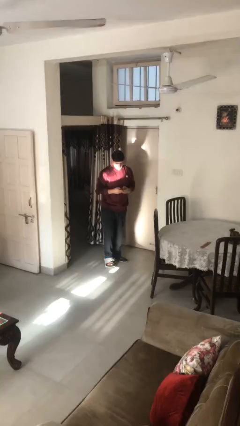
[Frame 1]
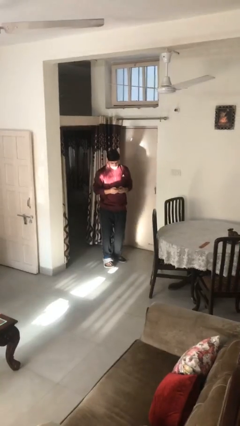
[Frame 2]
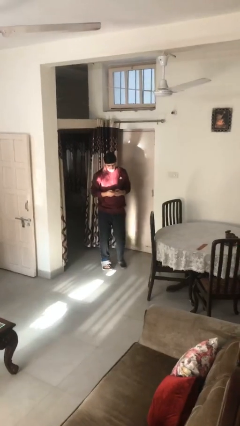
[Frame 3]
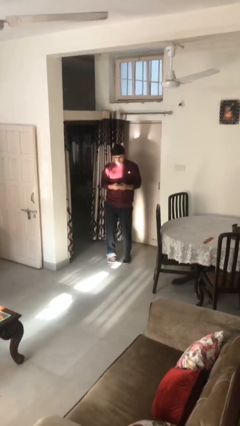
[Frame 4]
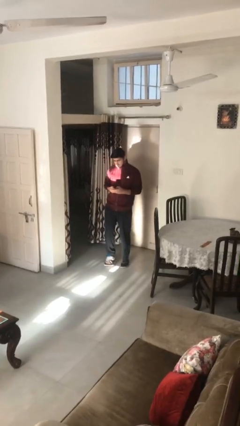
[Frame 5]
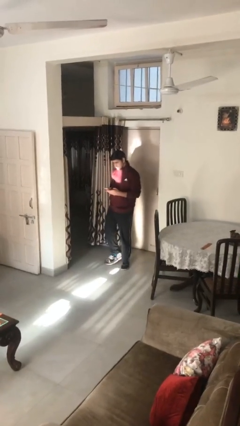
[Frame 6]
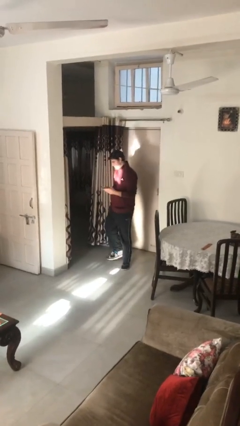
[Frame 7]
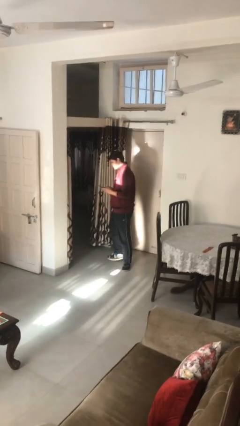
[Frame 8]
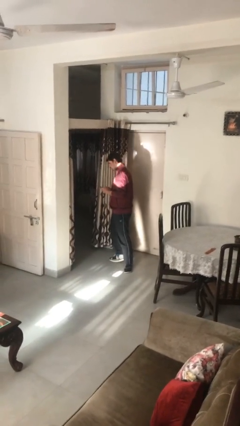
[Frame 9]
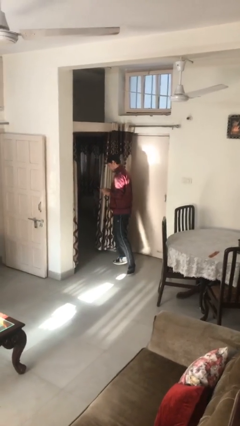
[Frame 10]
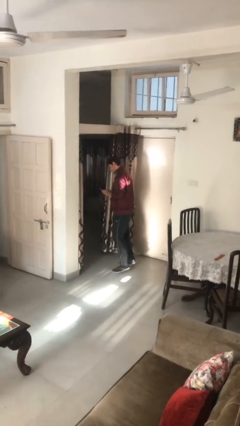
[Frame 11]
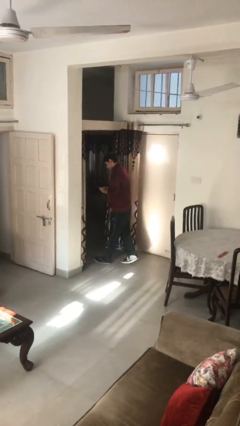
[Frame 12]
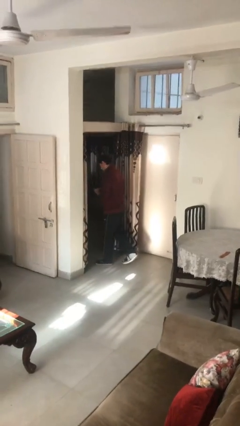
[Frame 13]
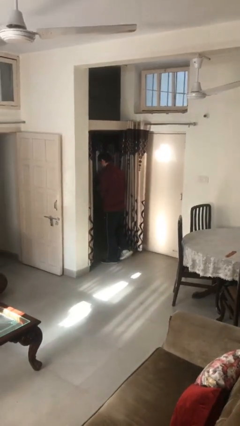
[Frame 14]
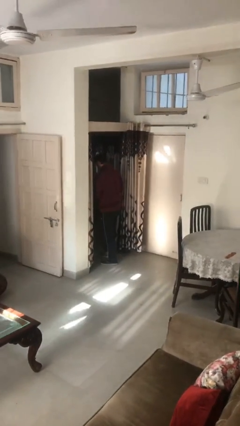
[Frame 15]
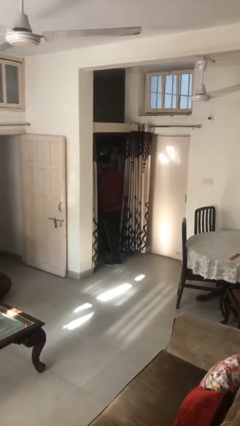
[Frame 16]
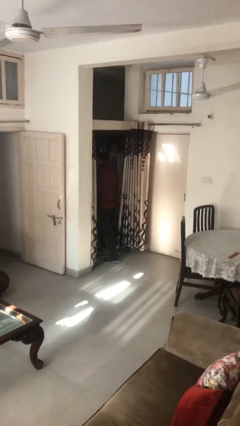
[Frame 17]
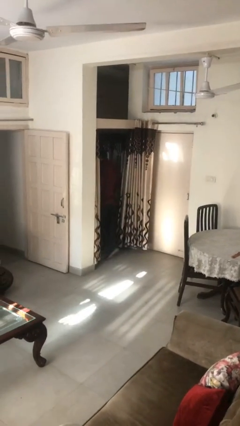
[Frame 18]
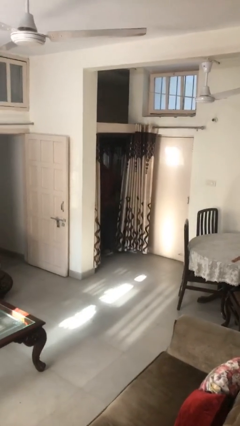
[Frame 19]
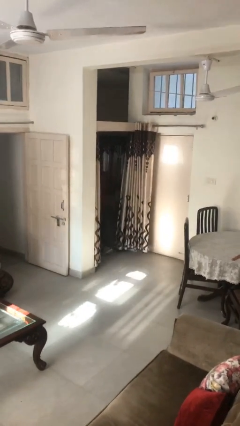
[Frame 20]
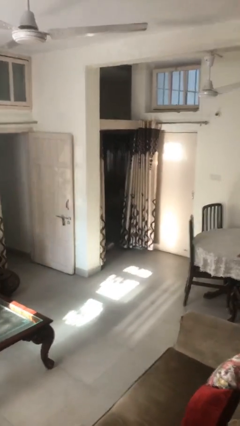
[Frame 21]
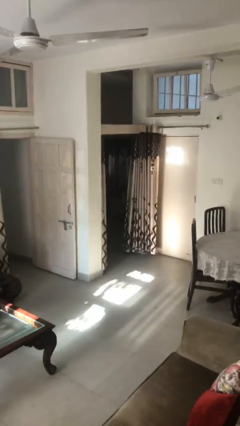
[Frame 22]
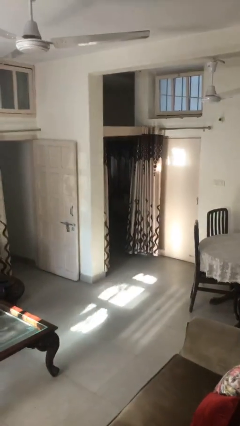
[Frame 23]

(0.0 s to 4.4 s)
person exits scene through structure

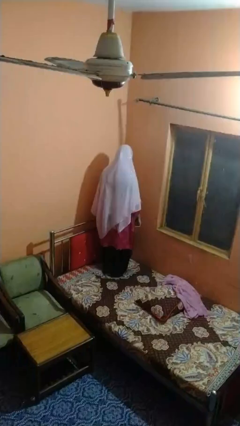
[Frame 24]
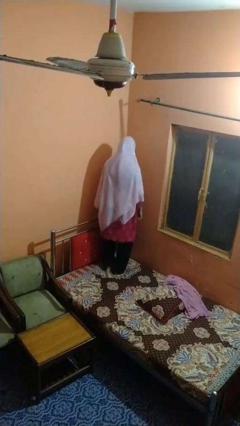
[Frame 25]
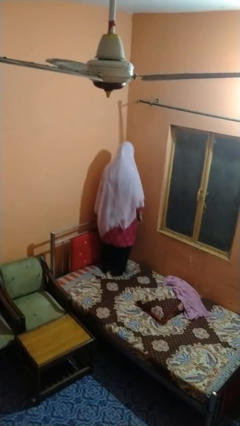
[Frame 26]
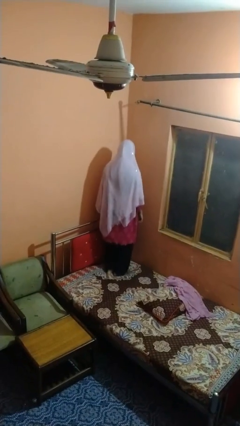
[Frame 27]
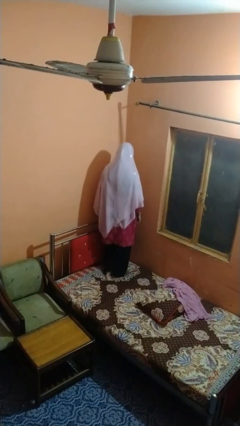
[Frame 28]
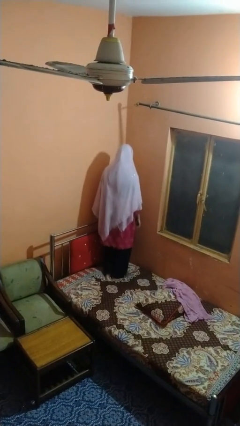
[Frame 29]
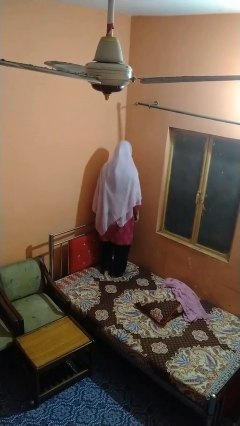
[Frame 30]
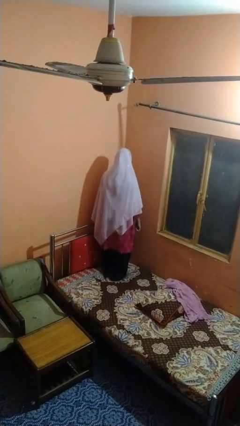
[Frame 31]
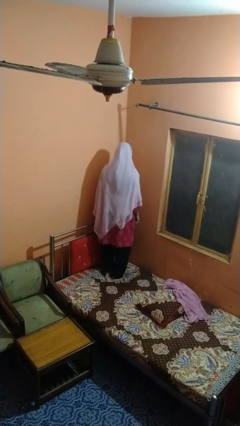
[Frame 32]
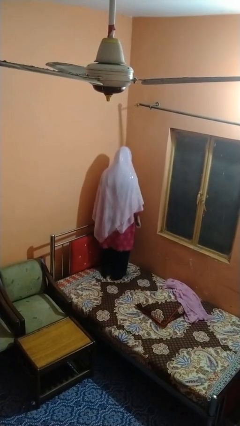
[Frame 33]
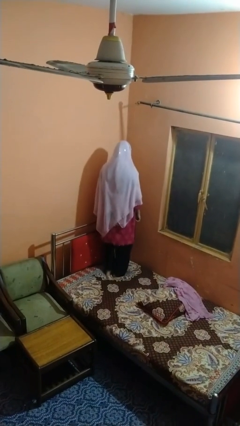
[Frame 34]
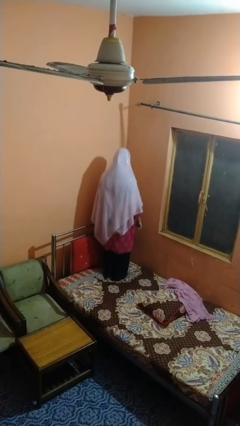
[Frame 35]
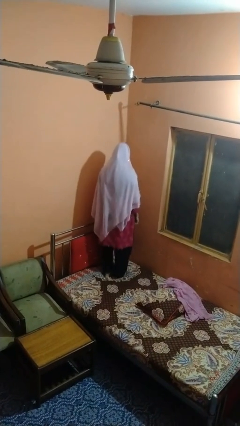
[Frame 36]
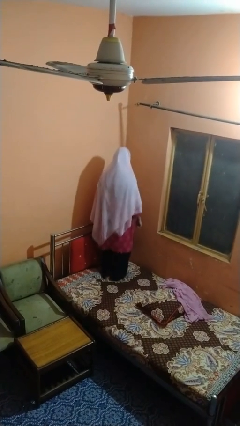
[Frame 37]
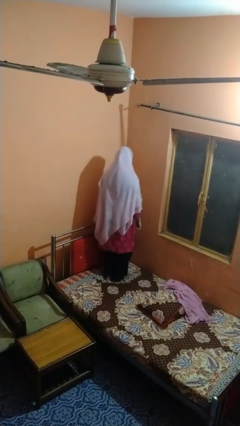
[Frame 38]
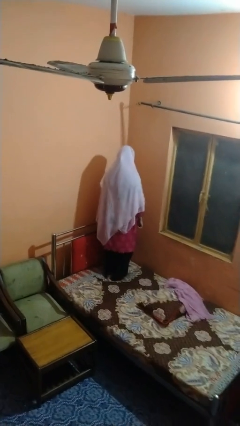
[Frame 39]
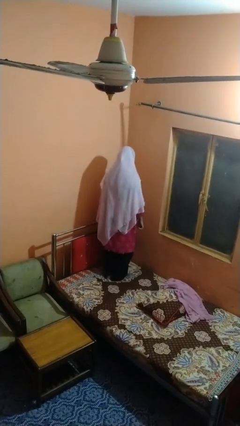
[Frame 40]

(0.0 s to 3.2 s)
person jumps on bed

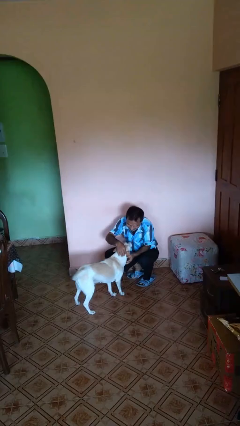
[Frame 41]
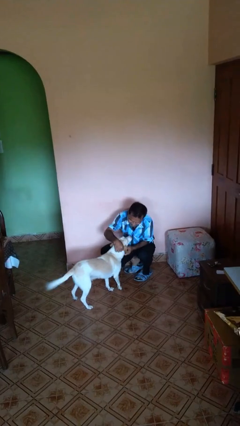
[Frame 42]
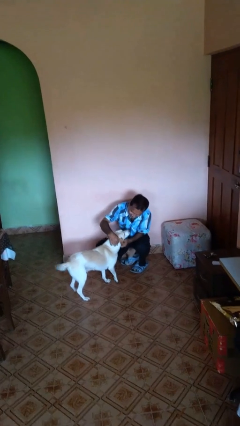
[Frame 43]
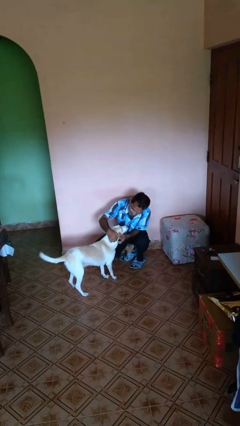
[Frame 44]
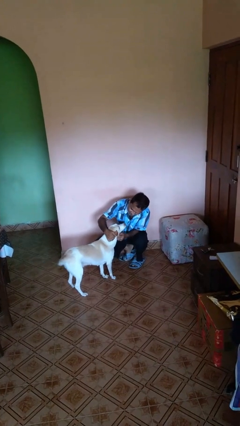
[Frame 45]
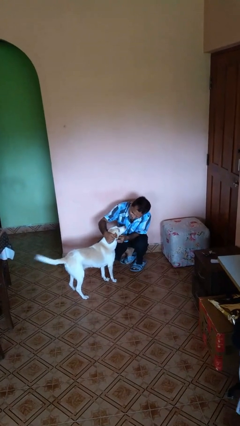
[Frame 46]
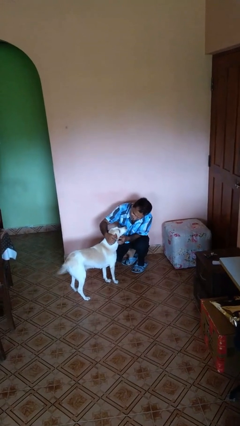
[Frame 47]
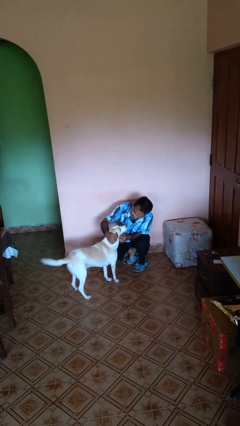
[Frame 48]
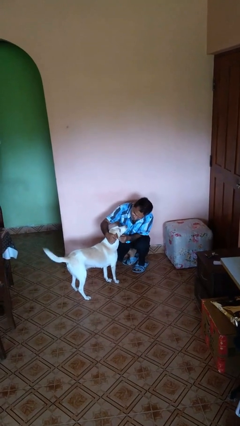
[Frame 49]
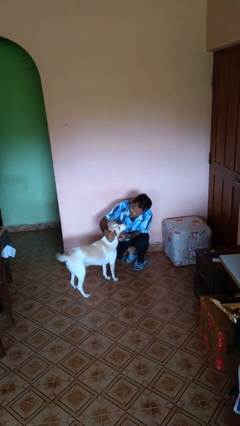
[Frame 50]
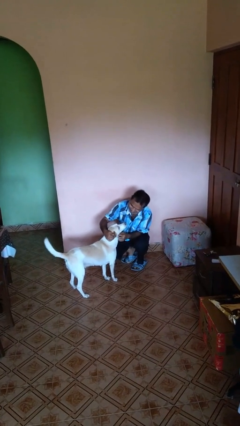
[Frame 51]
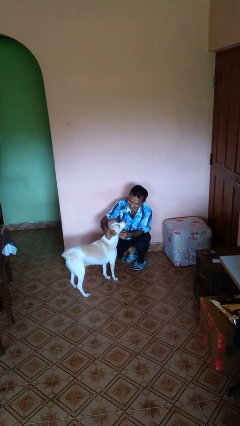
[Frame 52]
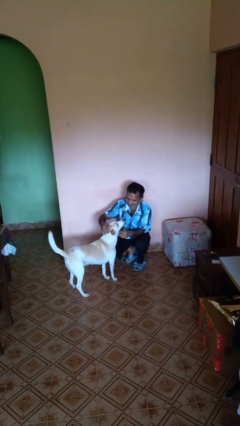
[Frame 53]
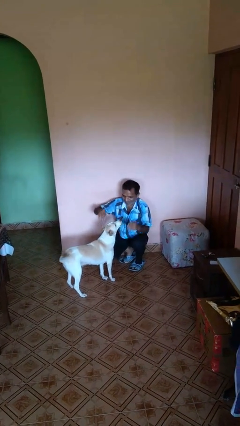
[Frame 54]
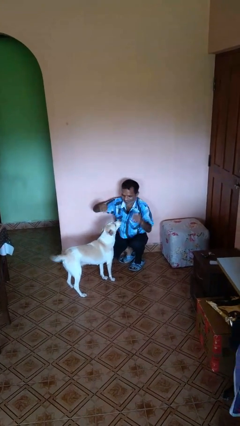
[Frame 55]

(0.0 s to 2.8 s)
person pets dog

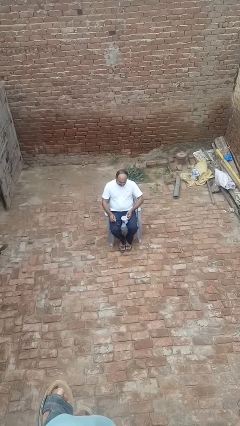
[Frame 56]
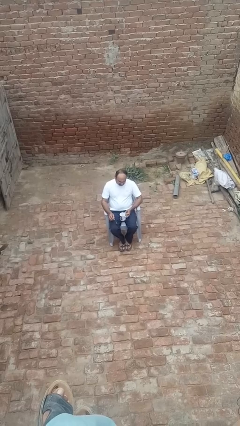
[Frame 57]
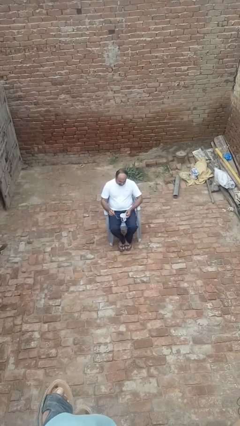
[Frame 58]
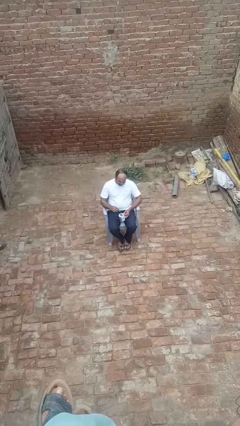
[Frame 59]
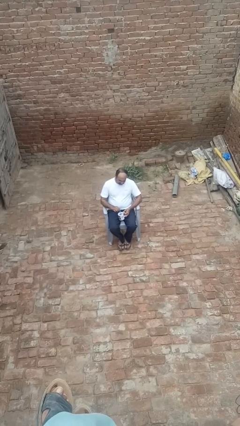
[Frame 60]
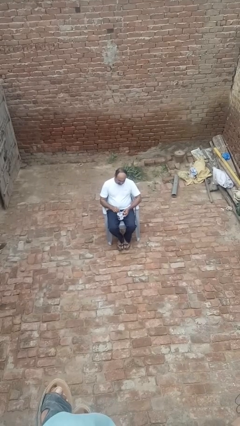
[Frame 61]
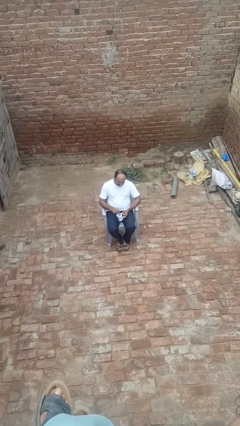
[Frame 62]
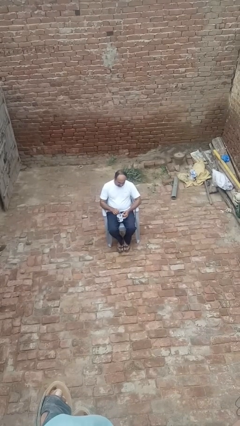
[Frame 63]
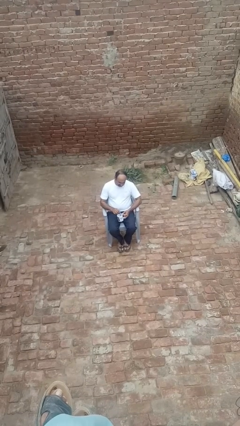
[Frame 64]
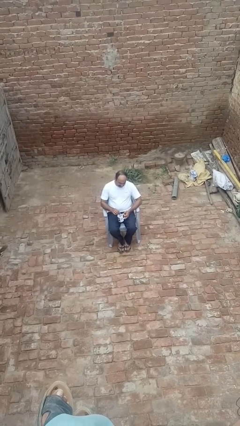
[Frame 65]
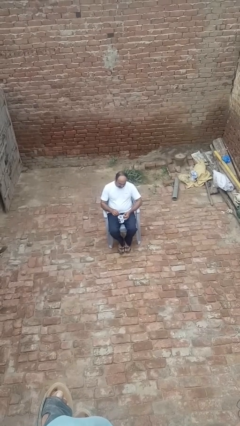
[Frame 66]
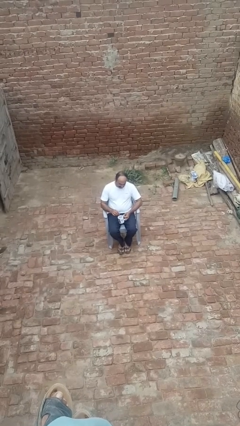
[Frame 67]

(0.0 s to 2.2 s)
person stirs mug

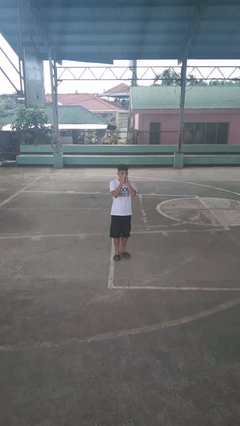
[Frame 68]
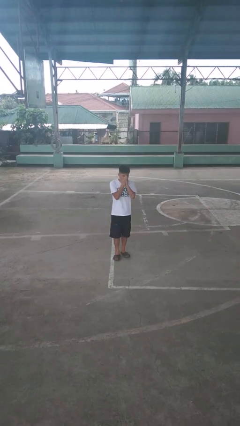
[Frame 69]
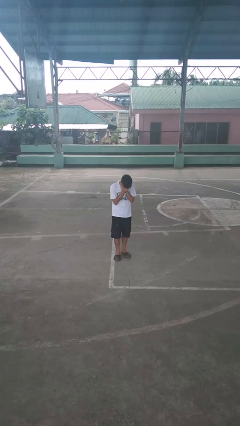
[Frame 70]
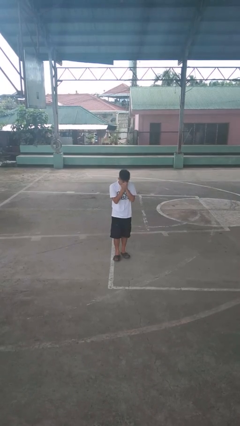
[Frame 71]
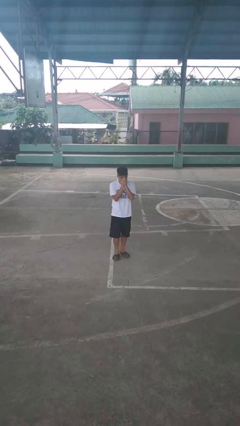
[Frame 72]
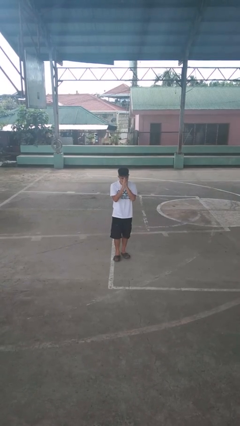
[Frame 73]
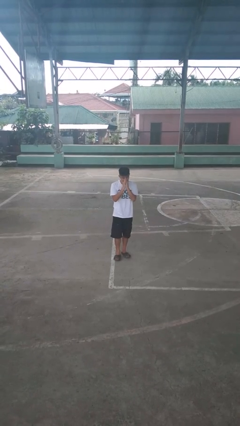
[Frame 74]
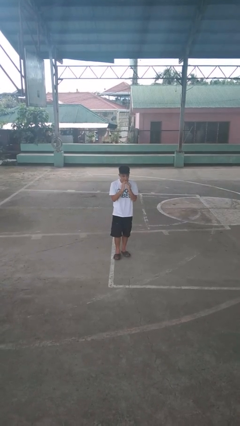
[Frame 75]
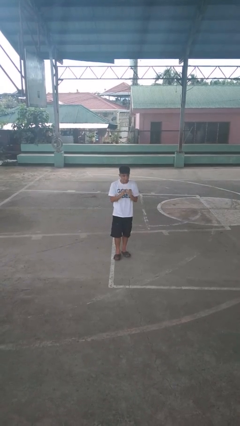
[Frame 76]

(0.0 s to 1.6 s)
person sneezes into hand

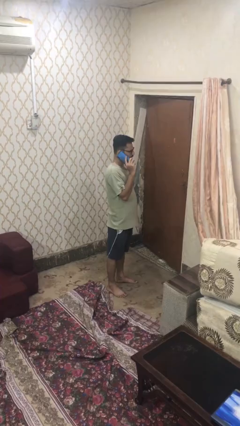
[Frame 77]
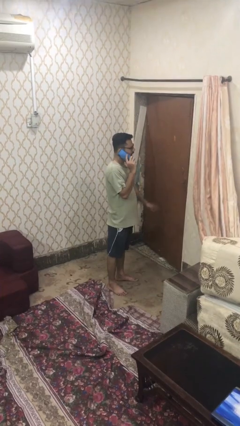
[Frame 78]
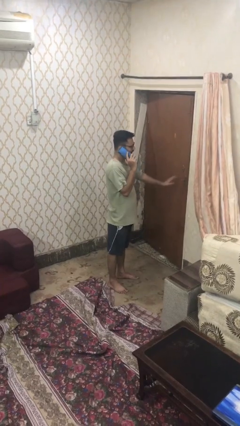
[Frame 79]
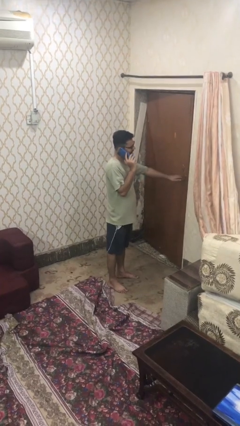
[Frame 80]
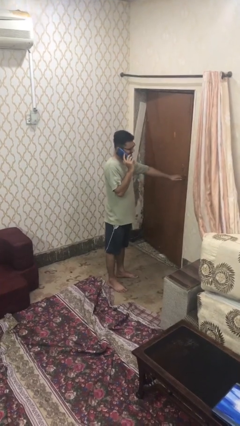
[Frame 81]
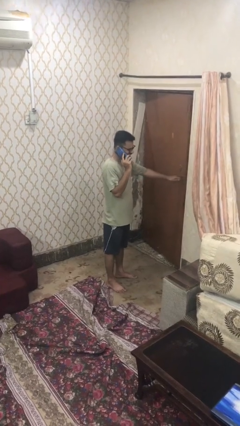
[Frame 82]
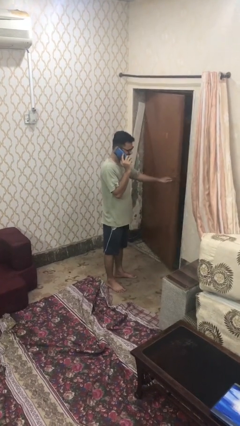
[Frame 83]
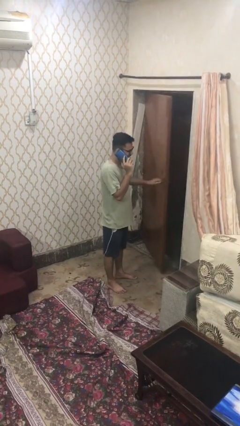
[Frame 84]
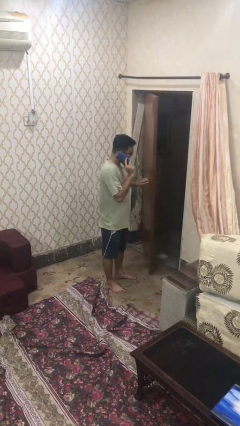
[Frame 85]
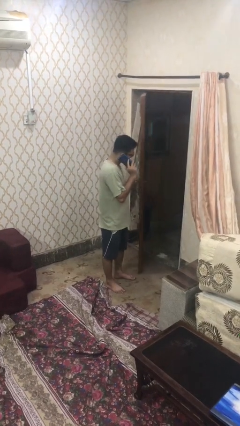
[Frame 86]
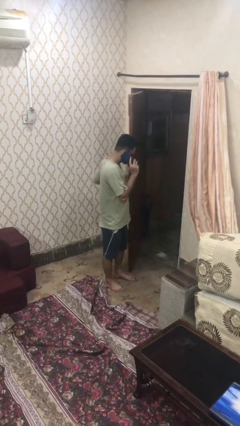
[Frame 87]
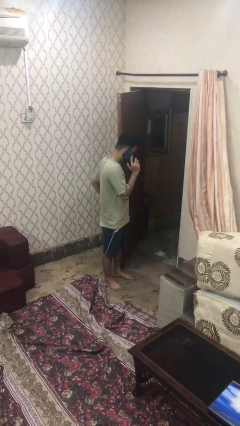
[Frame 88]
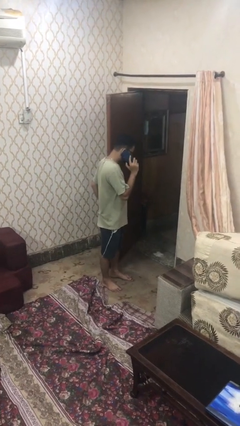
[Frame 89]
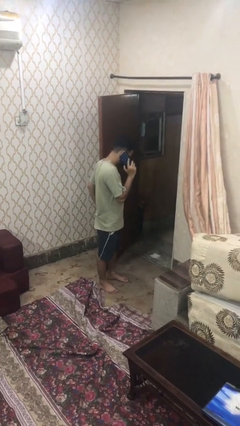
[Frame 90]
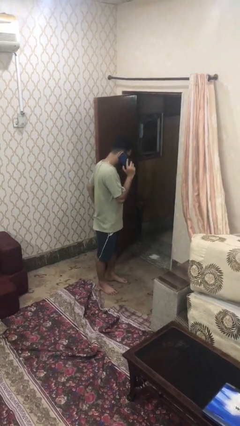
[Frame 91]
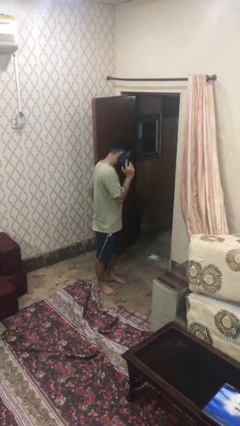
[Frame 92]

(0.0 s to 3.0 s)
person opens facility door
